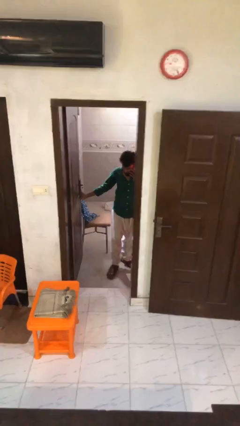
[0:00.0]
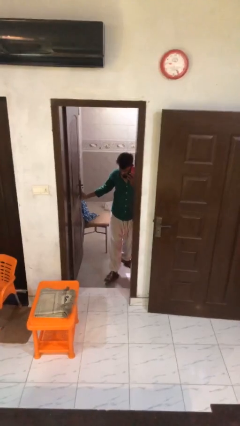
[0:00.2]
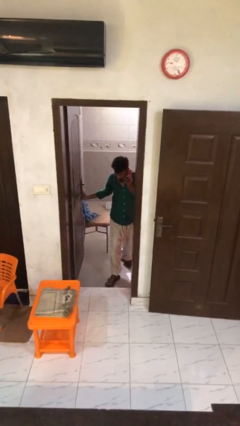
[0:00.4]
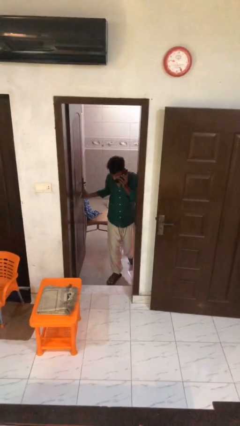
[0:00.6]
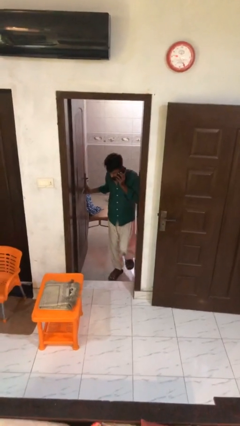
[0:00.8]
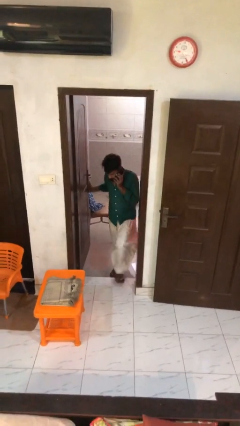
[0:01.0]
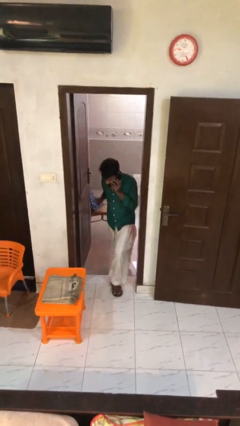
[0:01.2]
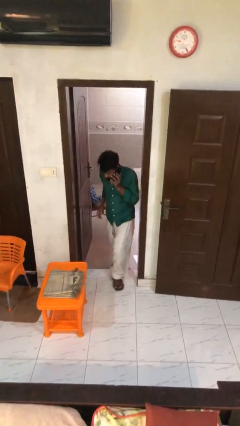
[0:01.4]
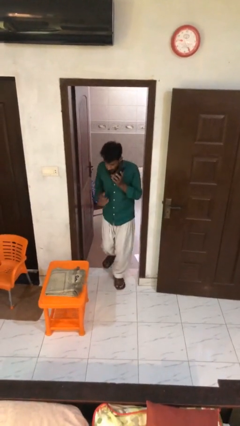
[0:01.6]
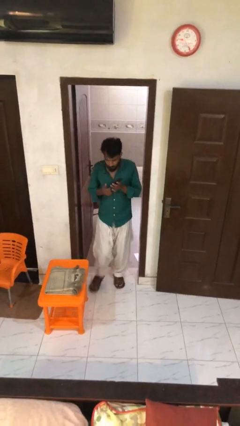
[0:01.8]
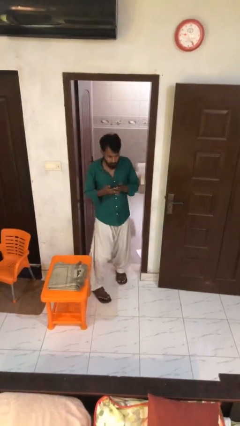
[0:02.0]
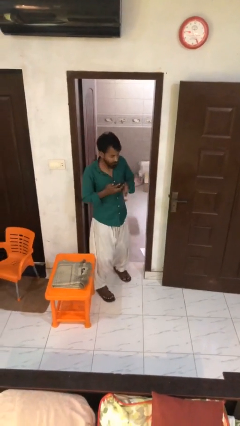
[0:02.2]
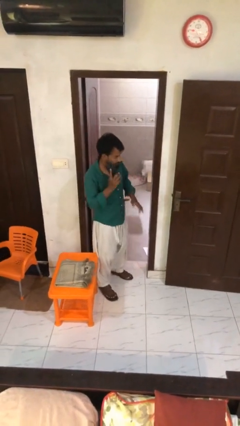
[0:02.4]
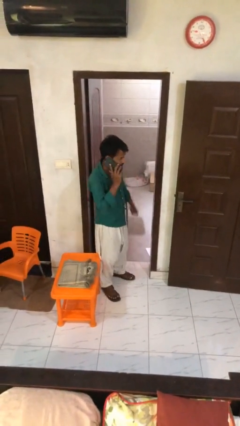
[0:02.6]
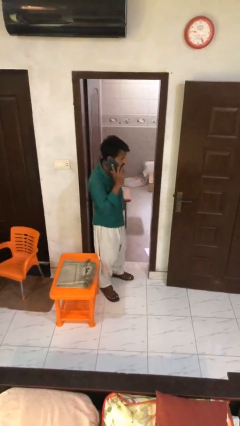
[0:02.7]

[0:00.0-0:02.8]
person enters scene through structure

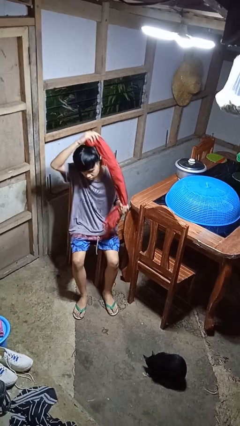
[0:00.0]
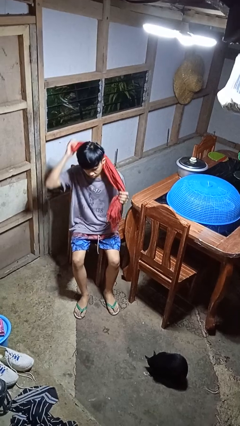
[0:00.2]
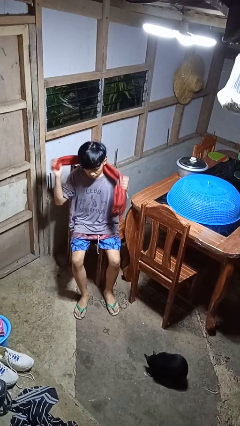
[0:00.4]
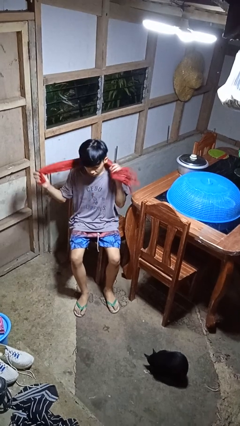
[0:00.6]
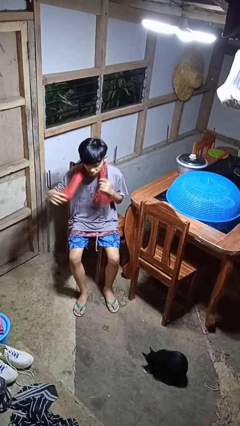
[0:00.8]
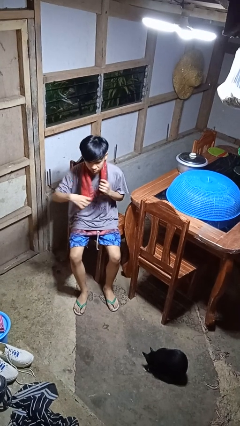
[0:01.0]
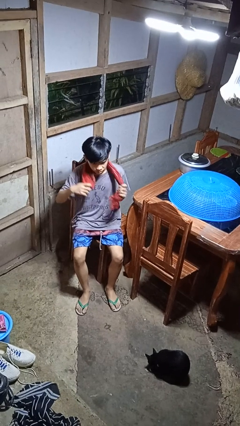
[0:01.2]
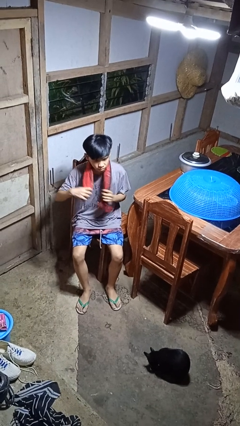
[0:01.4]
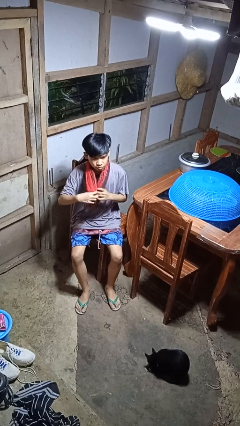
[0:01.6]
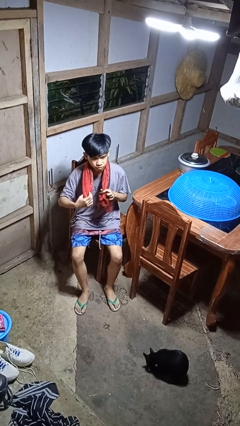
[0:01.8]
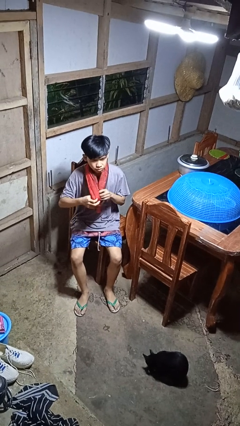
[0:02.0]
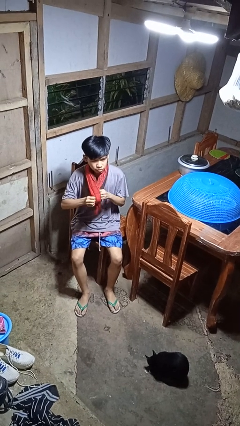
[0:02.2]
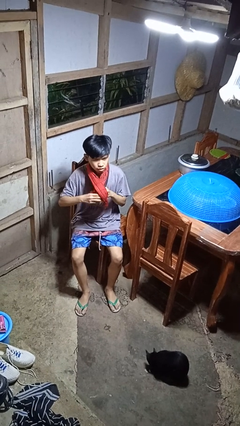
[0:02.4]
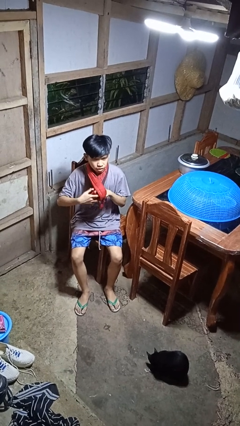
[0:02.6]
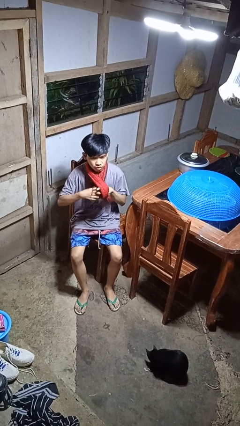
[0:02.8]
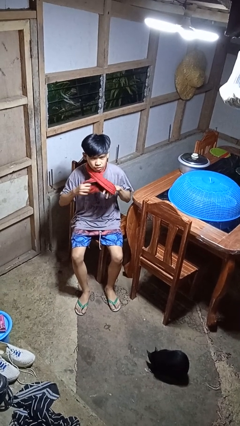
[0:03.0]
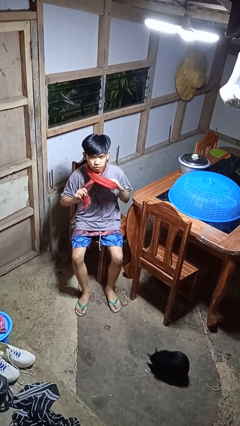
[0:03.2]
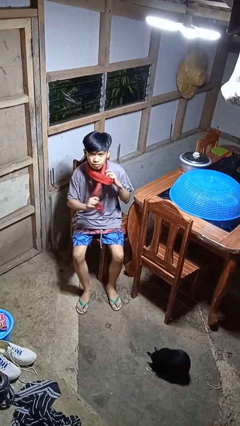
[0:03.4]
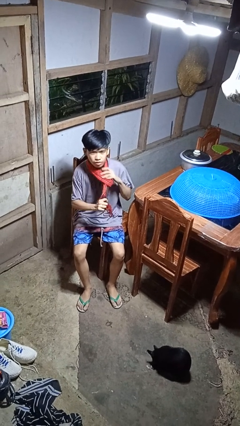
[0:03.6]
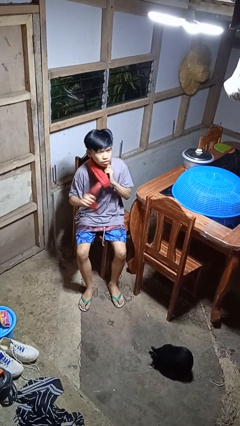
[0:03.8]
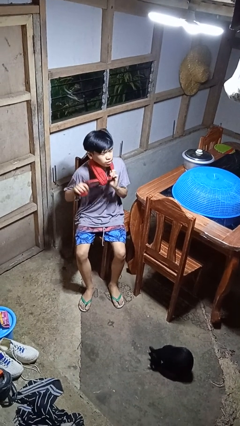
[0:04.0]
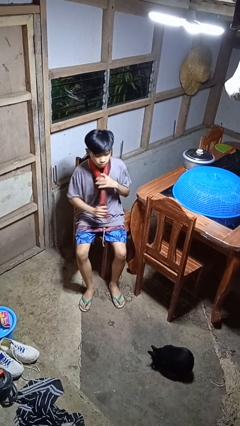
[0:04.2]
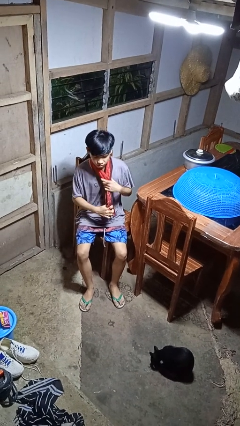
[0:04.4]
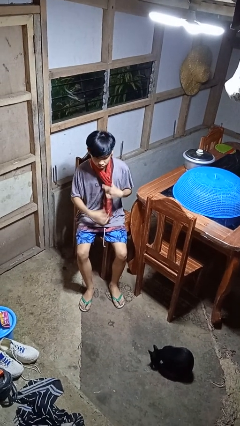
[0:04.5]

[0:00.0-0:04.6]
person puts on scarf

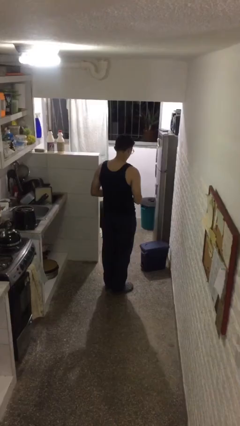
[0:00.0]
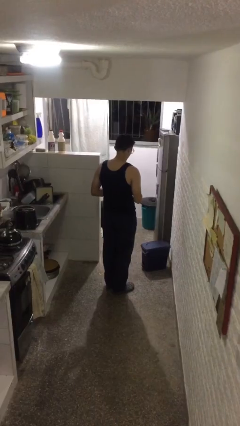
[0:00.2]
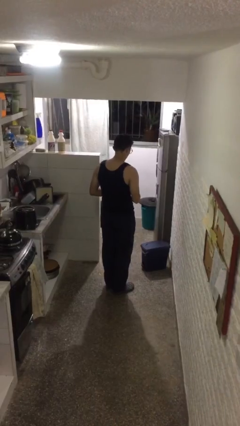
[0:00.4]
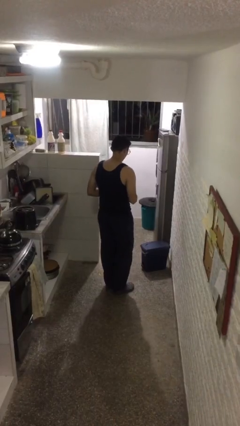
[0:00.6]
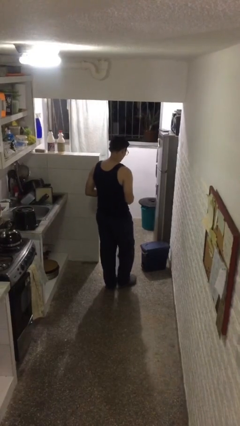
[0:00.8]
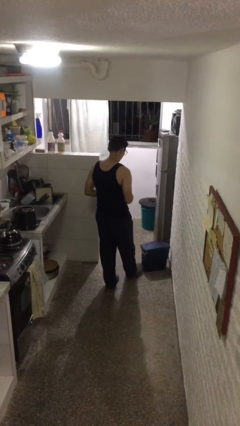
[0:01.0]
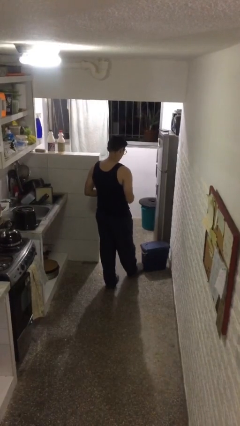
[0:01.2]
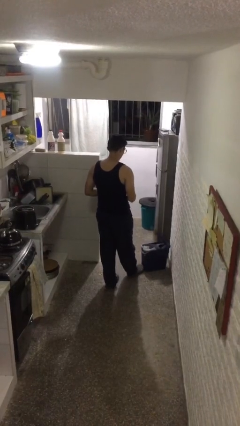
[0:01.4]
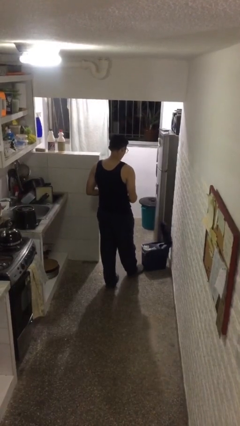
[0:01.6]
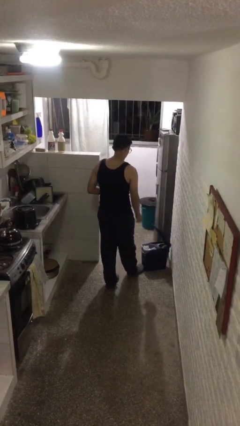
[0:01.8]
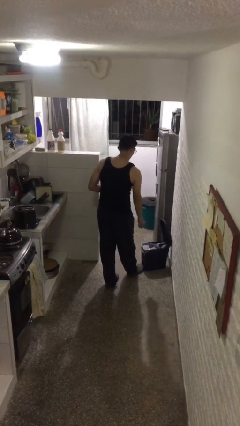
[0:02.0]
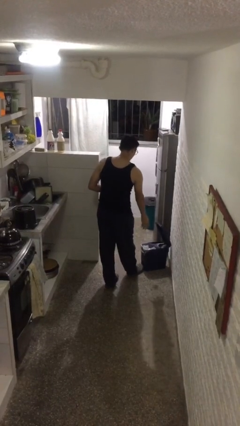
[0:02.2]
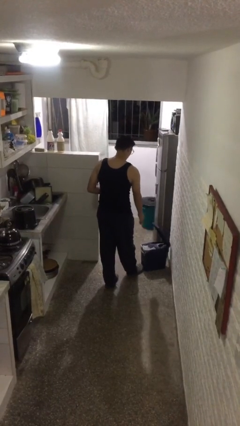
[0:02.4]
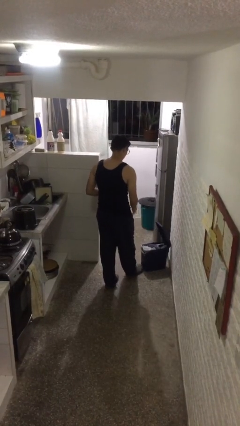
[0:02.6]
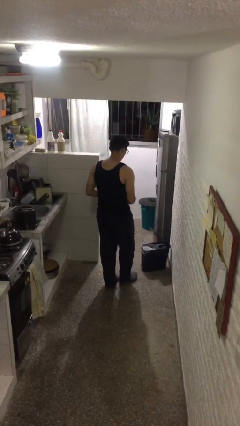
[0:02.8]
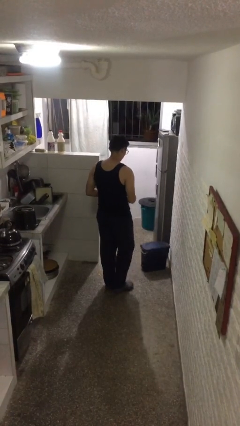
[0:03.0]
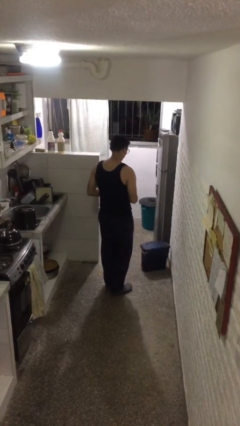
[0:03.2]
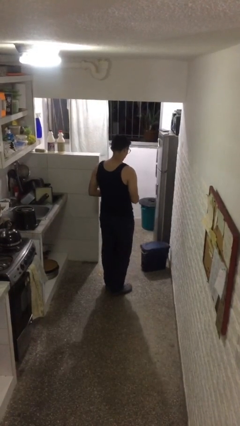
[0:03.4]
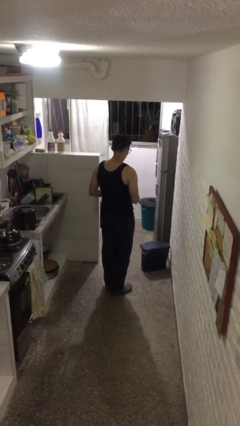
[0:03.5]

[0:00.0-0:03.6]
person discards trash

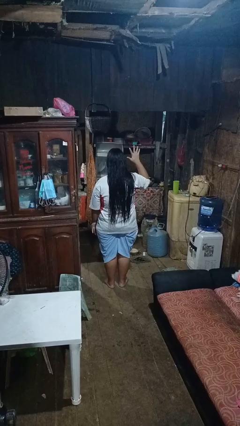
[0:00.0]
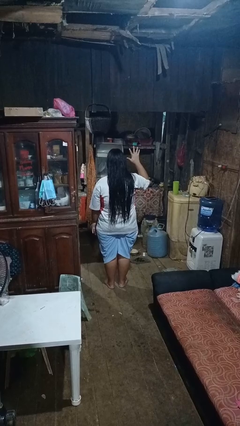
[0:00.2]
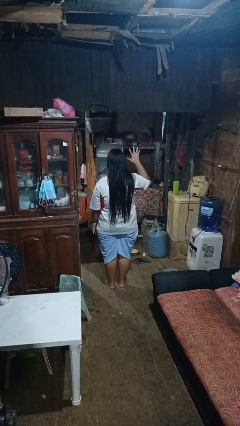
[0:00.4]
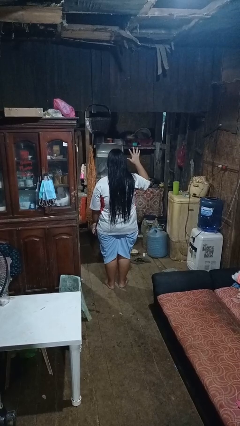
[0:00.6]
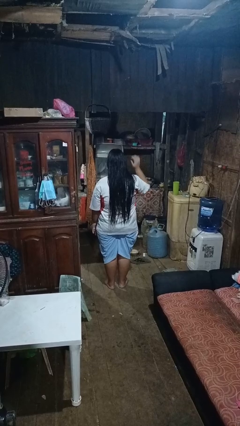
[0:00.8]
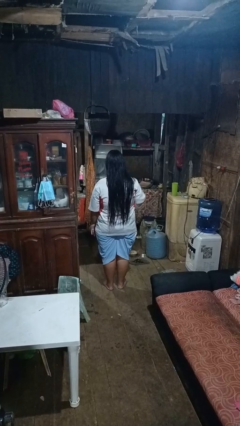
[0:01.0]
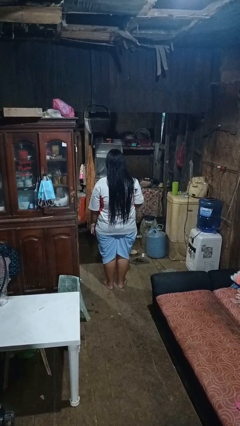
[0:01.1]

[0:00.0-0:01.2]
person gestures number five

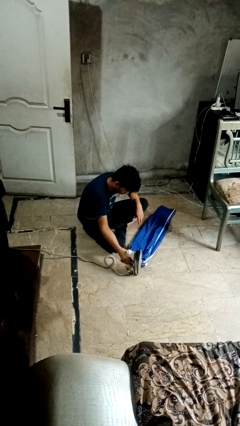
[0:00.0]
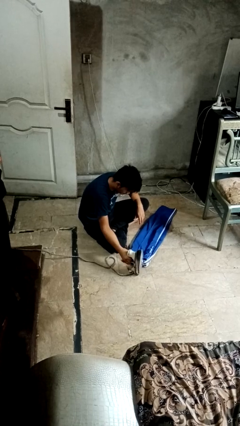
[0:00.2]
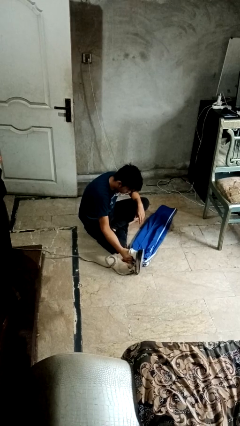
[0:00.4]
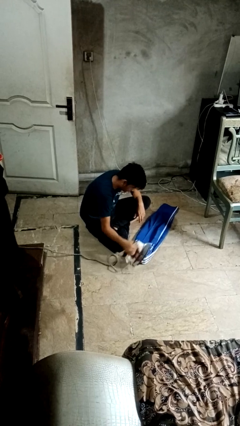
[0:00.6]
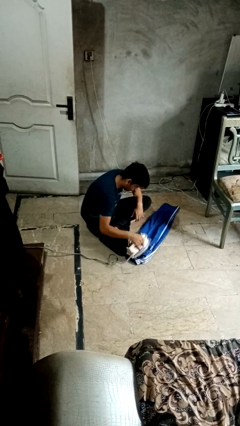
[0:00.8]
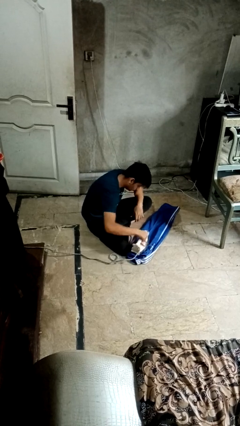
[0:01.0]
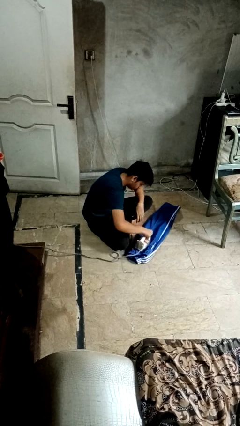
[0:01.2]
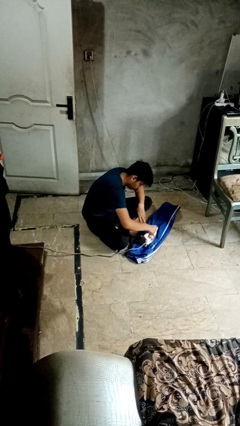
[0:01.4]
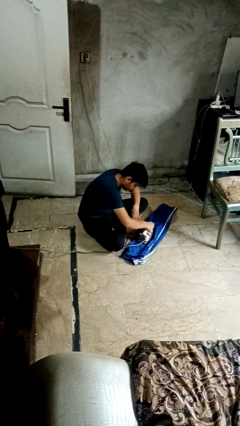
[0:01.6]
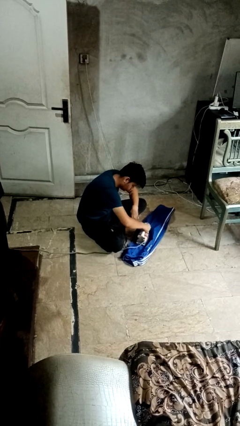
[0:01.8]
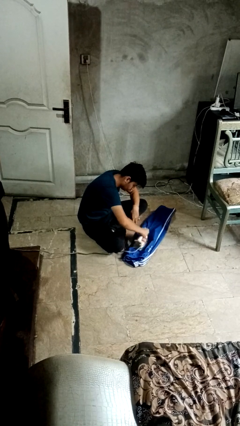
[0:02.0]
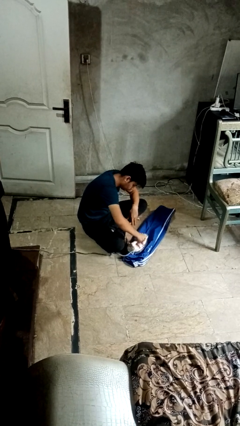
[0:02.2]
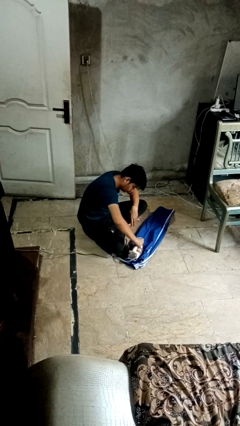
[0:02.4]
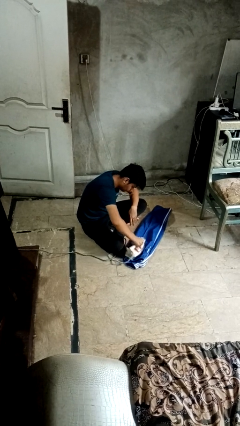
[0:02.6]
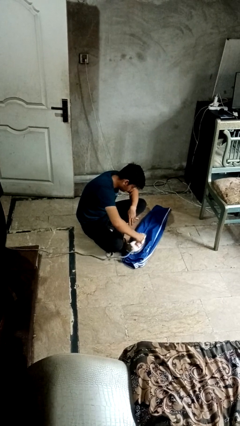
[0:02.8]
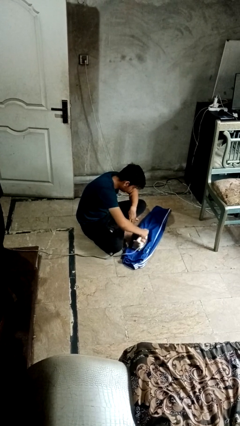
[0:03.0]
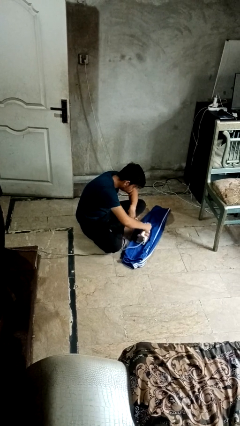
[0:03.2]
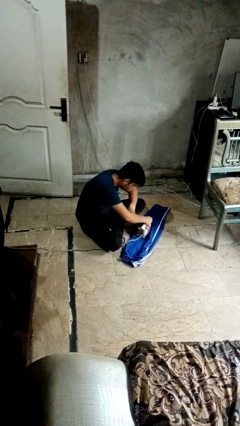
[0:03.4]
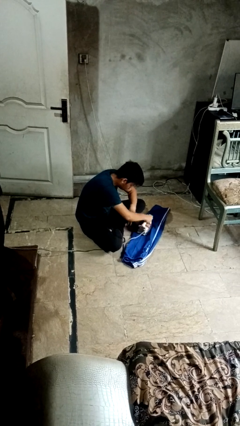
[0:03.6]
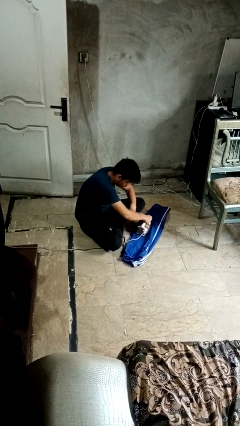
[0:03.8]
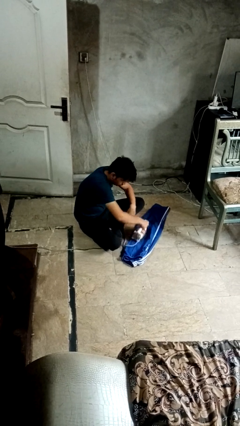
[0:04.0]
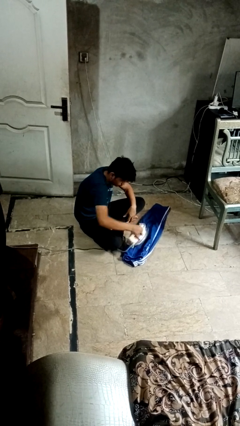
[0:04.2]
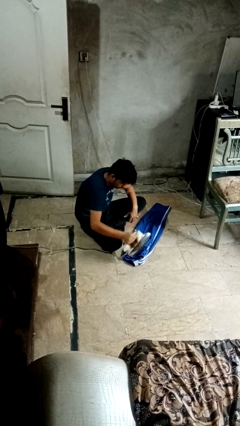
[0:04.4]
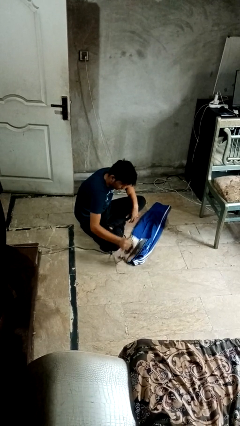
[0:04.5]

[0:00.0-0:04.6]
person irons clothes

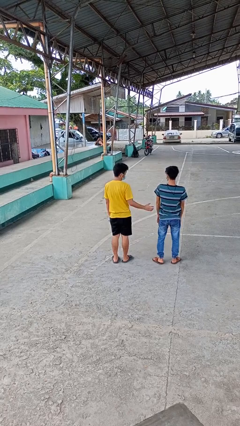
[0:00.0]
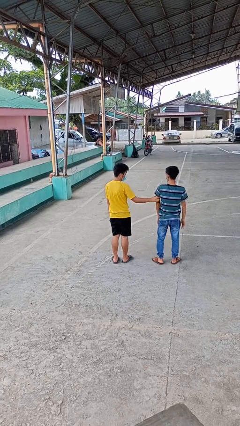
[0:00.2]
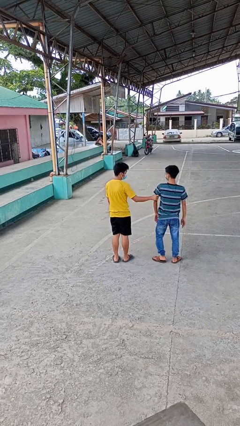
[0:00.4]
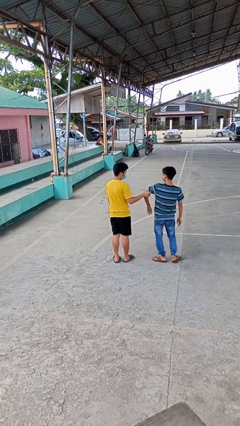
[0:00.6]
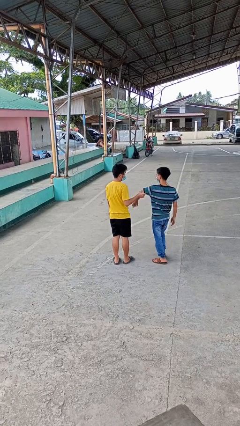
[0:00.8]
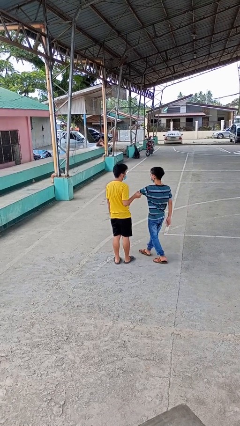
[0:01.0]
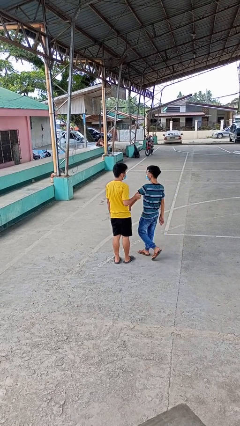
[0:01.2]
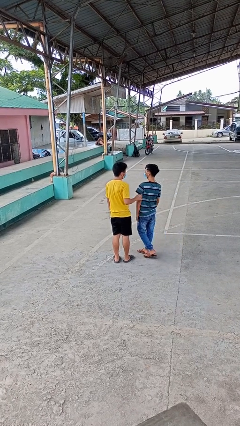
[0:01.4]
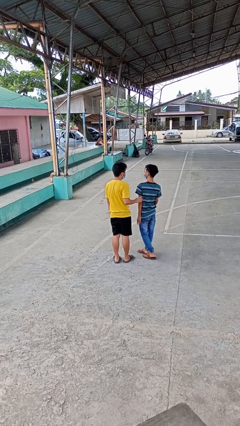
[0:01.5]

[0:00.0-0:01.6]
person grabs person by bicep
